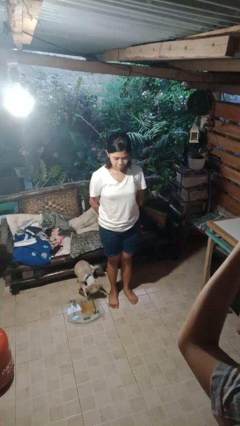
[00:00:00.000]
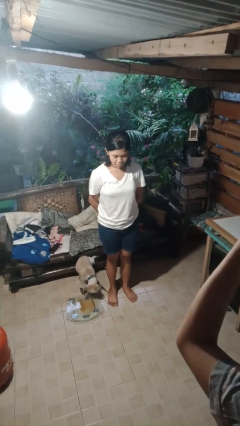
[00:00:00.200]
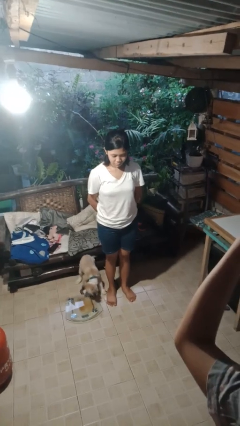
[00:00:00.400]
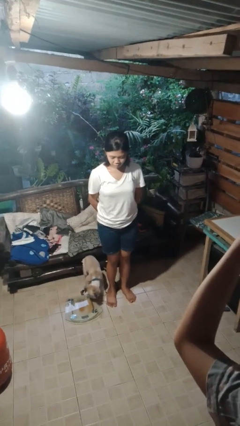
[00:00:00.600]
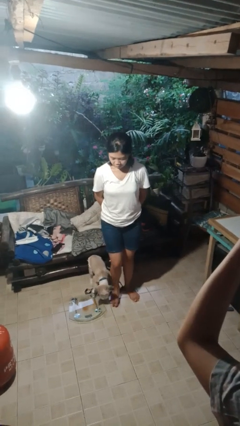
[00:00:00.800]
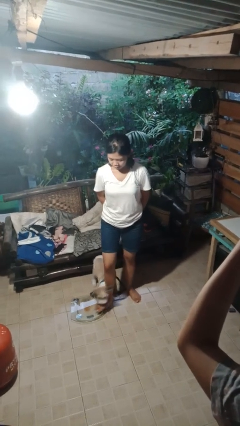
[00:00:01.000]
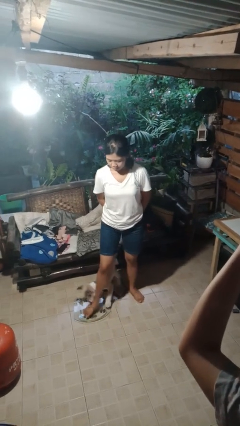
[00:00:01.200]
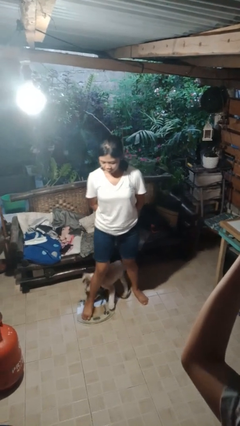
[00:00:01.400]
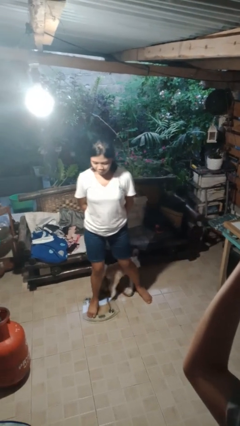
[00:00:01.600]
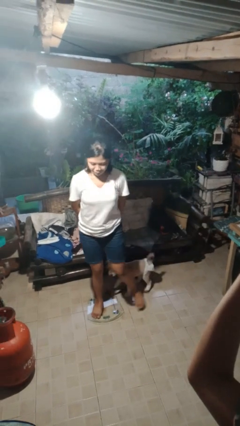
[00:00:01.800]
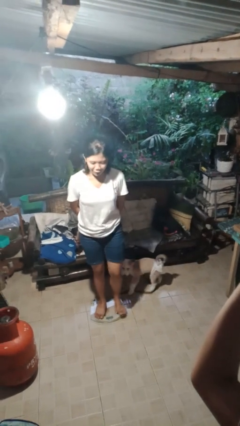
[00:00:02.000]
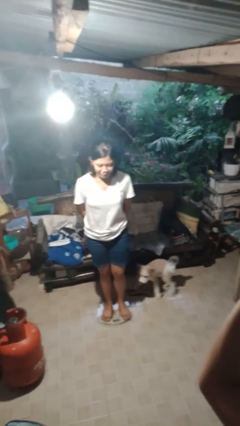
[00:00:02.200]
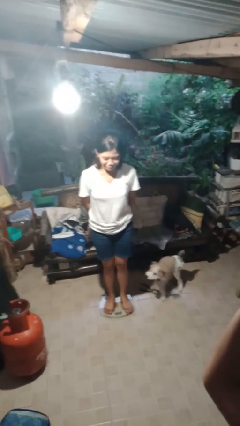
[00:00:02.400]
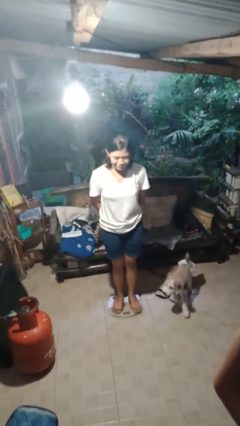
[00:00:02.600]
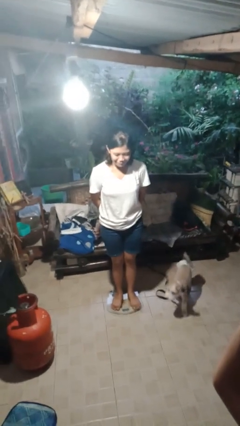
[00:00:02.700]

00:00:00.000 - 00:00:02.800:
person uses bodyweight scale

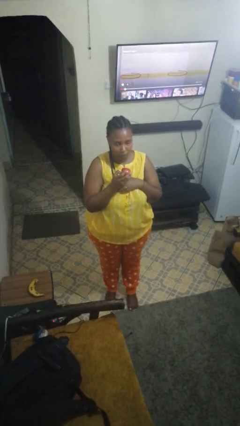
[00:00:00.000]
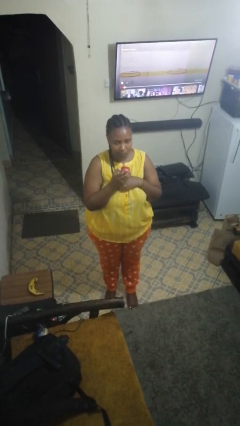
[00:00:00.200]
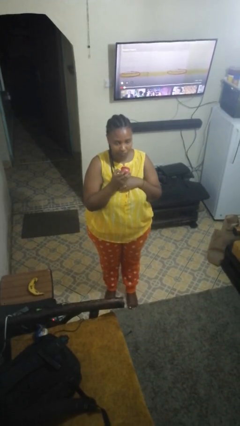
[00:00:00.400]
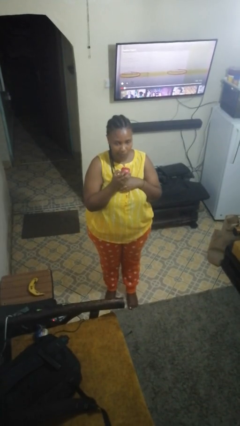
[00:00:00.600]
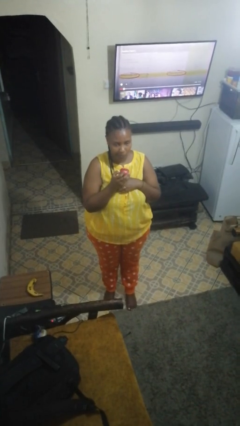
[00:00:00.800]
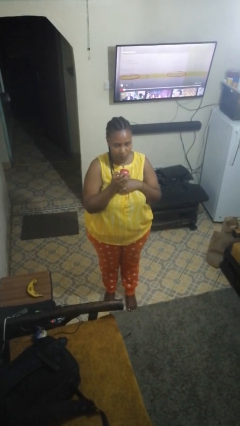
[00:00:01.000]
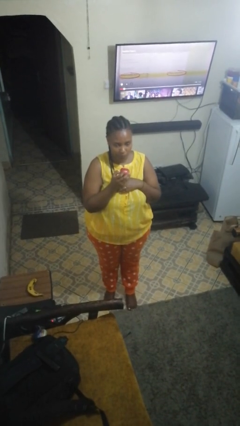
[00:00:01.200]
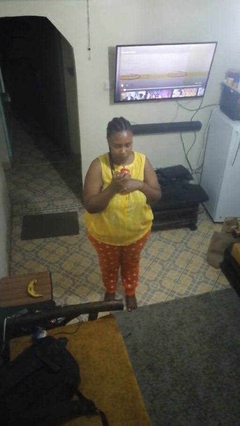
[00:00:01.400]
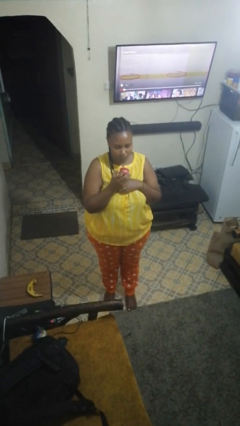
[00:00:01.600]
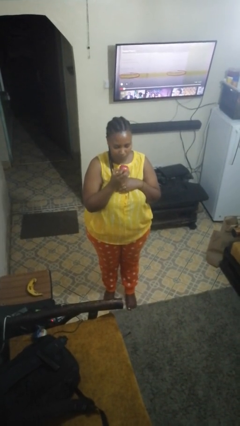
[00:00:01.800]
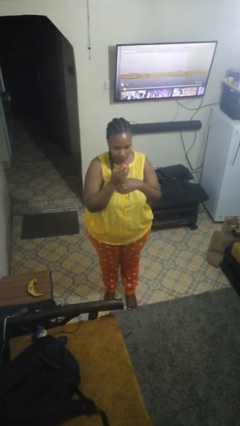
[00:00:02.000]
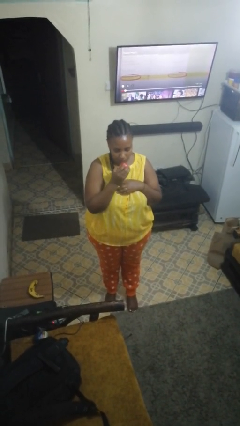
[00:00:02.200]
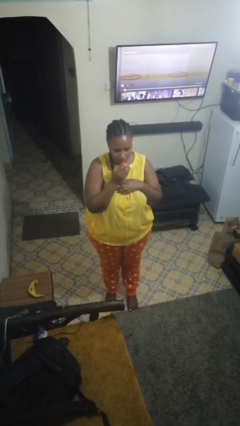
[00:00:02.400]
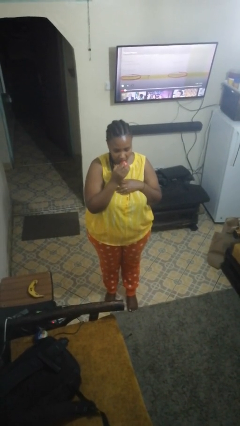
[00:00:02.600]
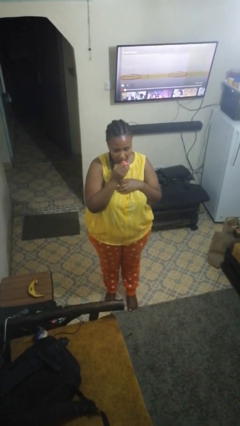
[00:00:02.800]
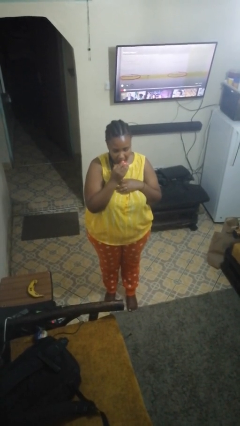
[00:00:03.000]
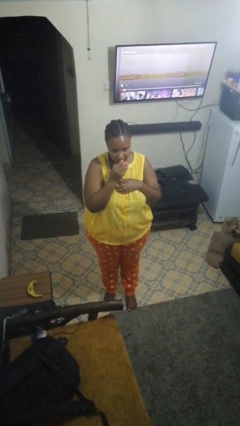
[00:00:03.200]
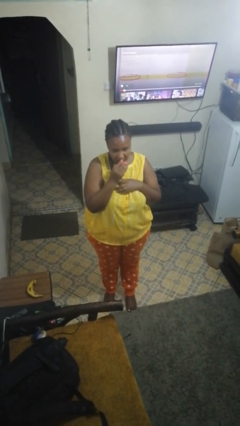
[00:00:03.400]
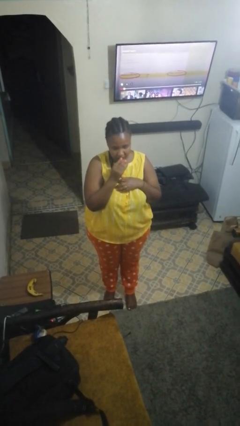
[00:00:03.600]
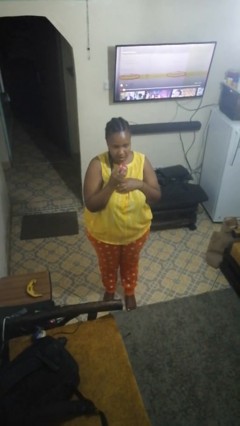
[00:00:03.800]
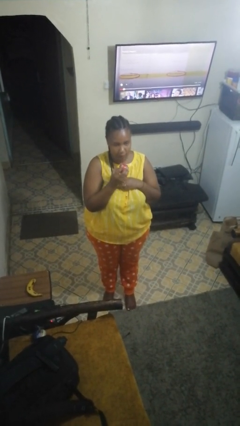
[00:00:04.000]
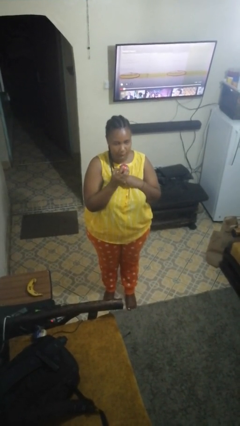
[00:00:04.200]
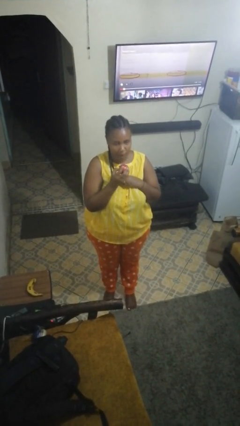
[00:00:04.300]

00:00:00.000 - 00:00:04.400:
person eats apple

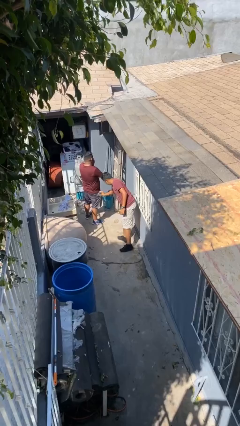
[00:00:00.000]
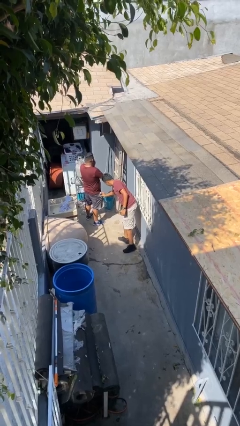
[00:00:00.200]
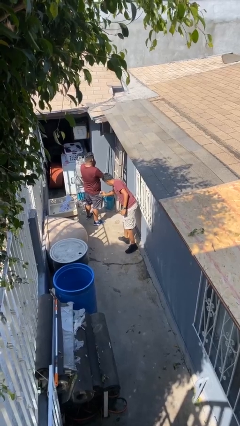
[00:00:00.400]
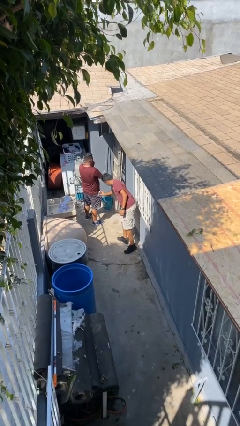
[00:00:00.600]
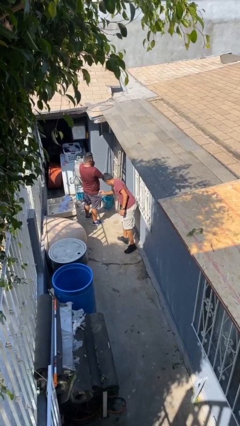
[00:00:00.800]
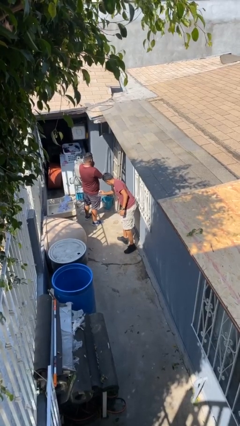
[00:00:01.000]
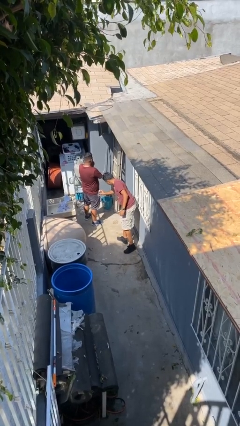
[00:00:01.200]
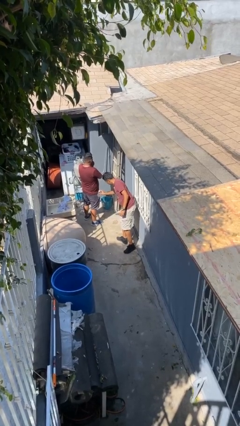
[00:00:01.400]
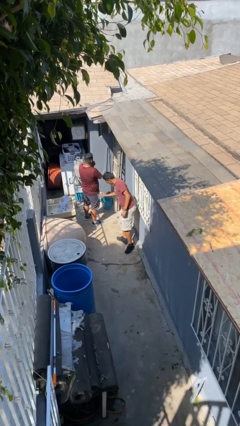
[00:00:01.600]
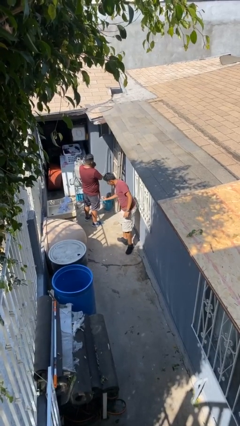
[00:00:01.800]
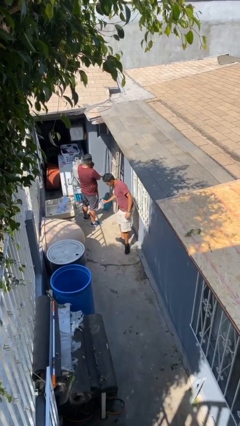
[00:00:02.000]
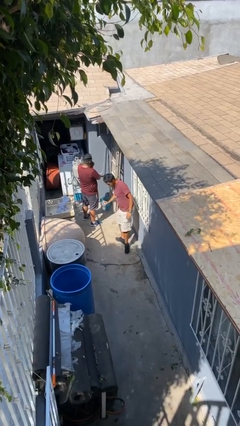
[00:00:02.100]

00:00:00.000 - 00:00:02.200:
person steals object from person

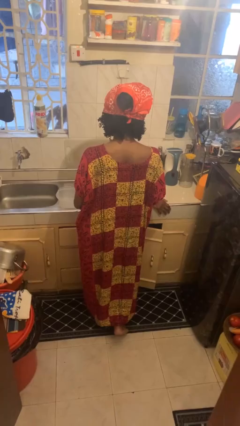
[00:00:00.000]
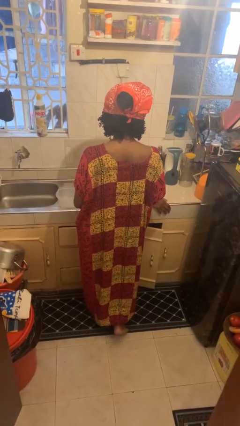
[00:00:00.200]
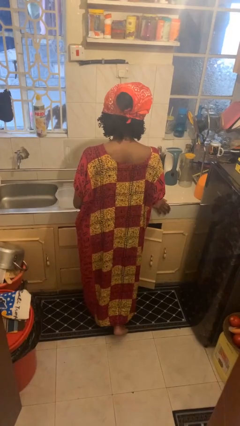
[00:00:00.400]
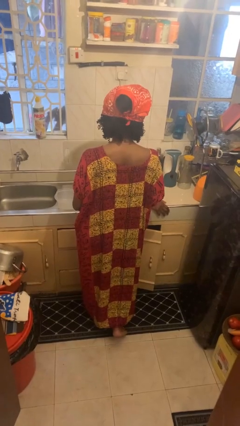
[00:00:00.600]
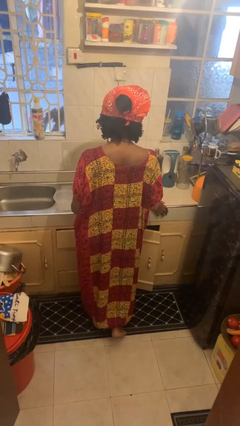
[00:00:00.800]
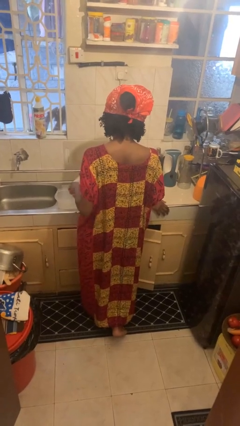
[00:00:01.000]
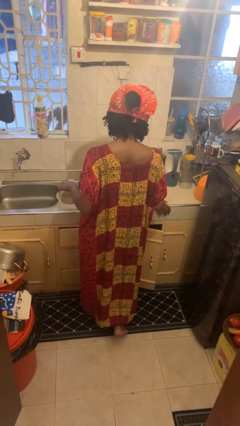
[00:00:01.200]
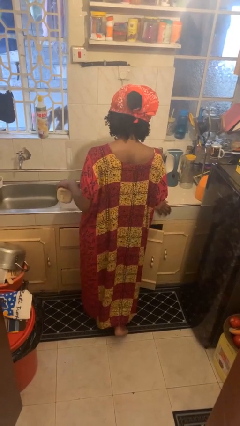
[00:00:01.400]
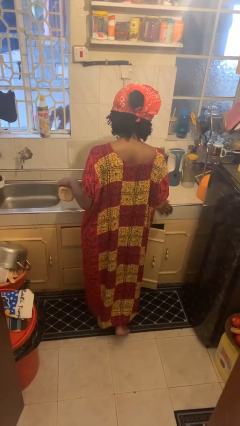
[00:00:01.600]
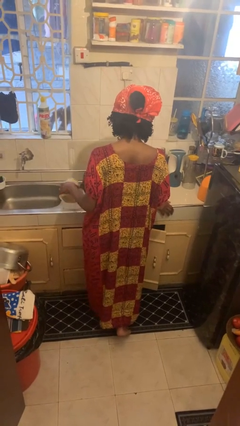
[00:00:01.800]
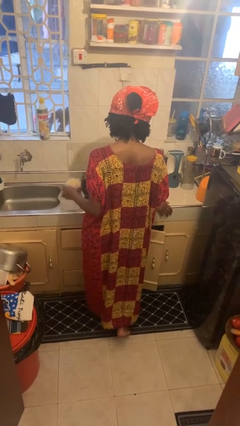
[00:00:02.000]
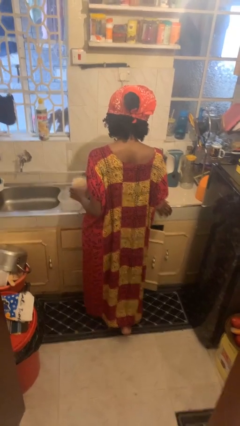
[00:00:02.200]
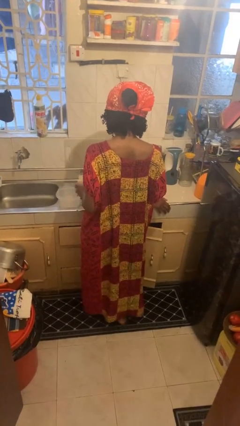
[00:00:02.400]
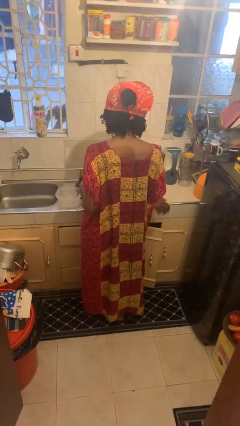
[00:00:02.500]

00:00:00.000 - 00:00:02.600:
person pours into bowl

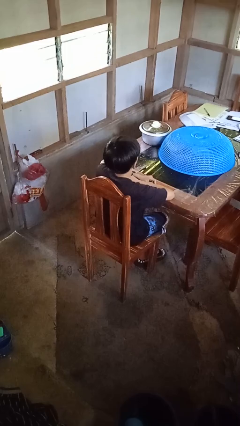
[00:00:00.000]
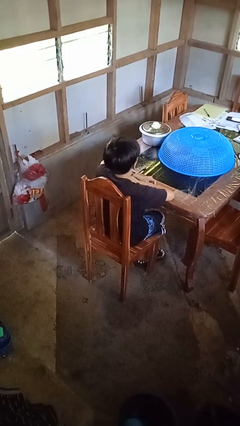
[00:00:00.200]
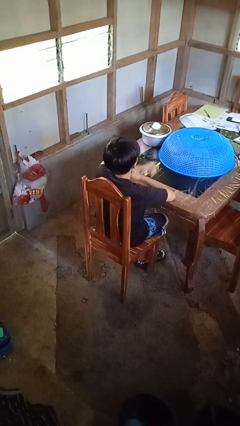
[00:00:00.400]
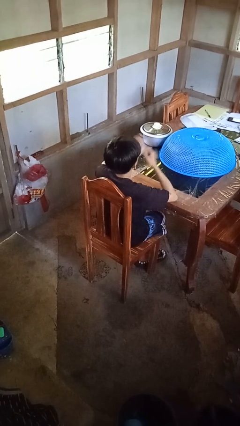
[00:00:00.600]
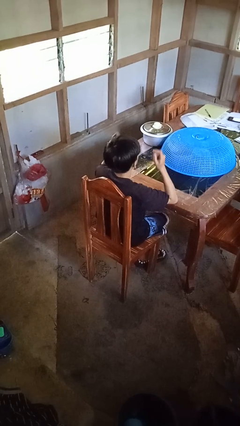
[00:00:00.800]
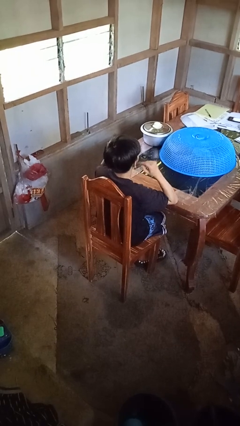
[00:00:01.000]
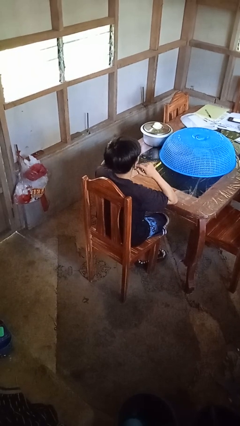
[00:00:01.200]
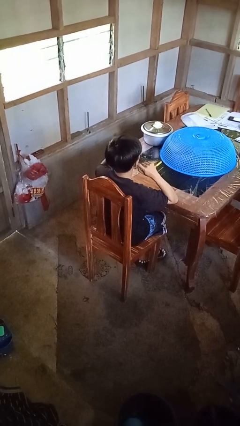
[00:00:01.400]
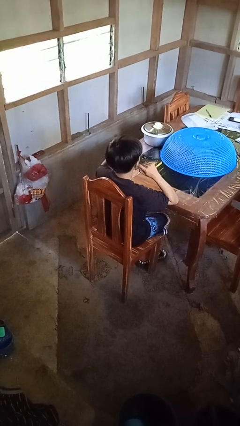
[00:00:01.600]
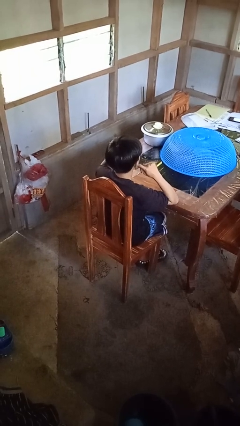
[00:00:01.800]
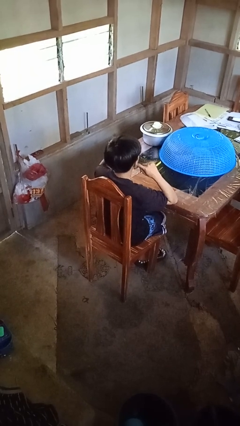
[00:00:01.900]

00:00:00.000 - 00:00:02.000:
person puts fingers in ear

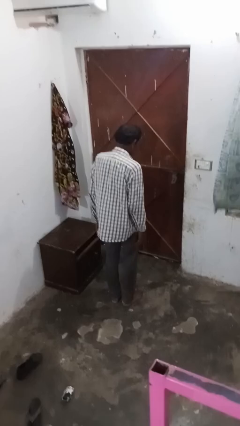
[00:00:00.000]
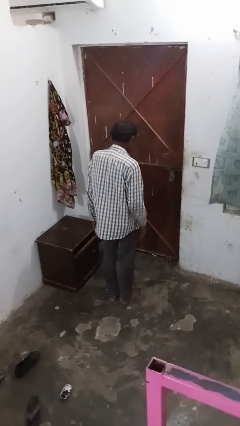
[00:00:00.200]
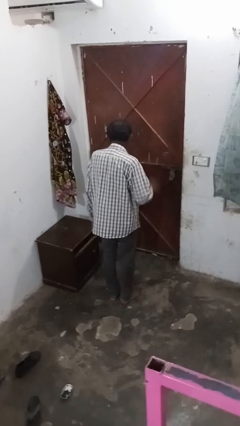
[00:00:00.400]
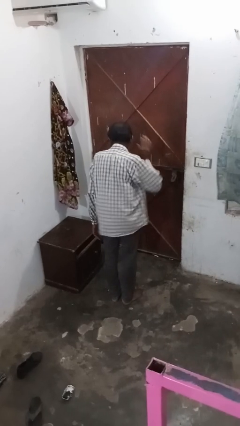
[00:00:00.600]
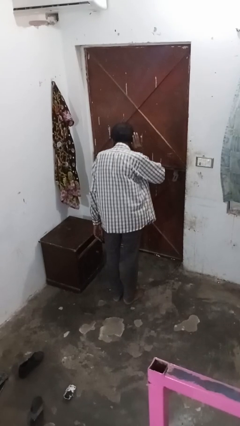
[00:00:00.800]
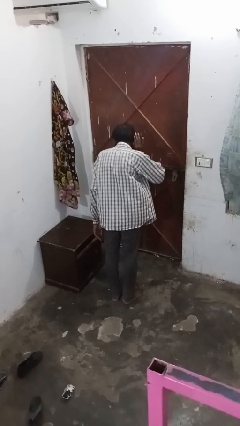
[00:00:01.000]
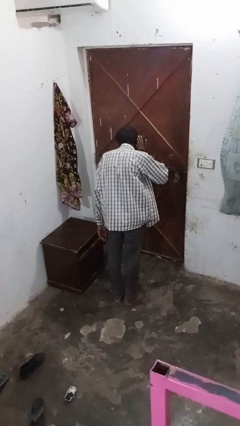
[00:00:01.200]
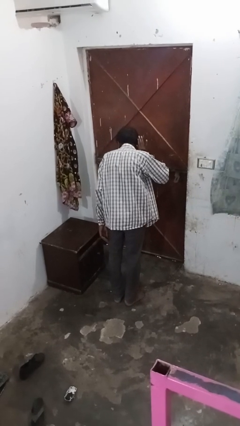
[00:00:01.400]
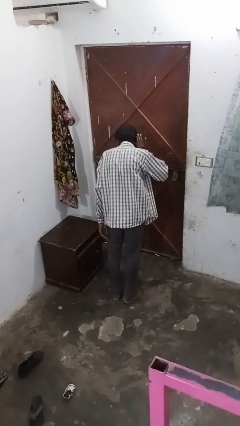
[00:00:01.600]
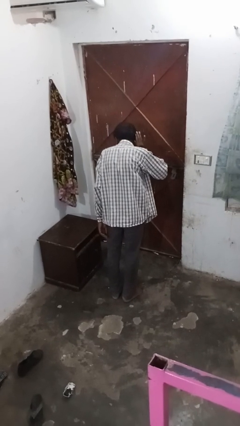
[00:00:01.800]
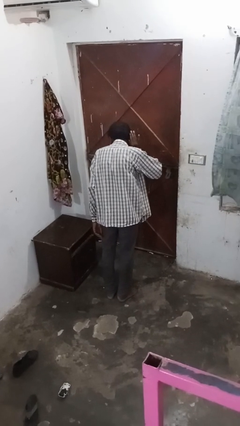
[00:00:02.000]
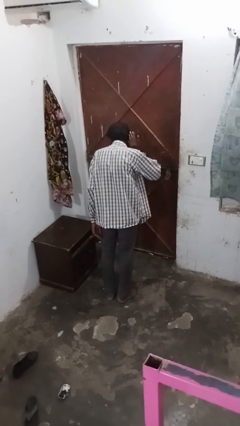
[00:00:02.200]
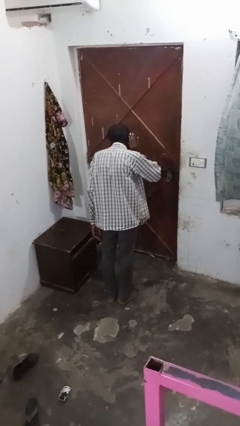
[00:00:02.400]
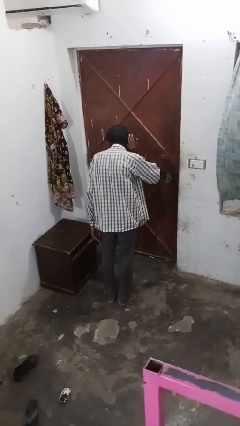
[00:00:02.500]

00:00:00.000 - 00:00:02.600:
person gestures listen closely

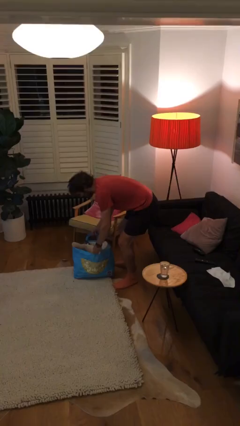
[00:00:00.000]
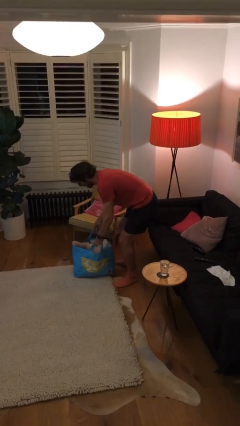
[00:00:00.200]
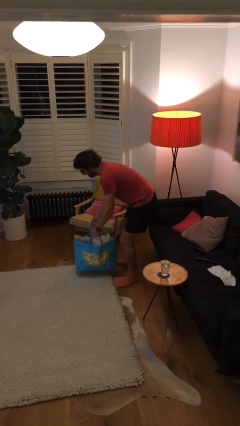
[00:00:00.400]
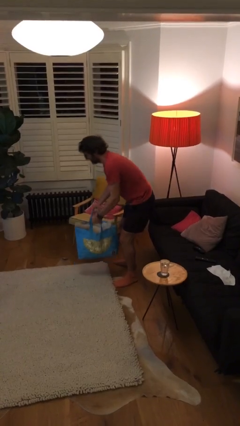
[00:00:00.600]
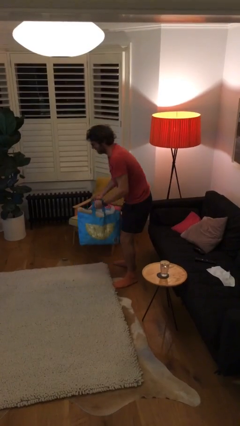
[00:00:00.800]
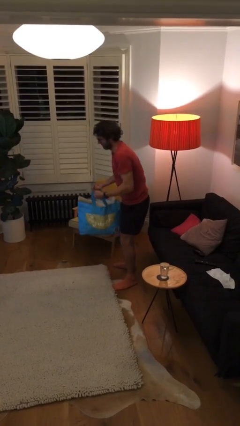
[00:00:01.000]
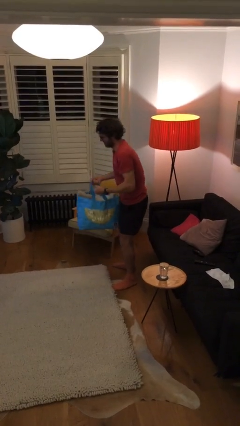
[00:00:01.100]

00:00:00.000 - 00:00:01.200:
person picks up object from floor
